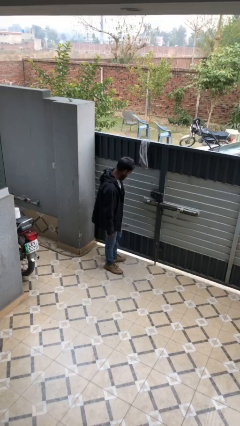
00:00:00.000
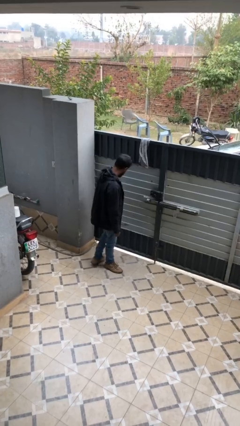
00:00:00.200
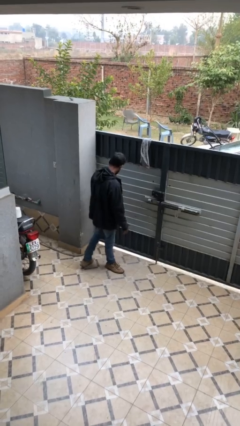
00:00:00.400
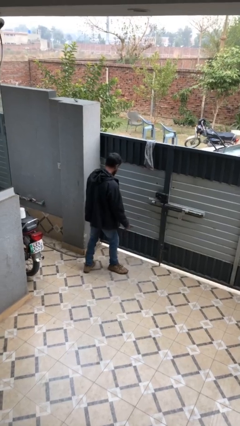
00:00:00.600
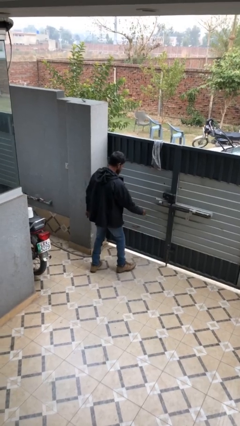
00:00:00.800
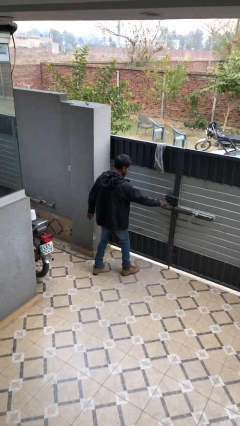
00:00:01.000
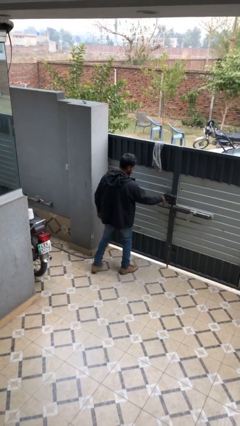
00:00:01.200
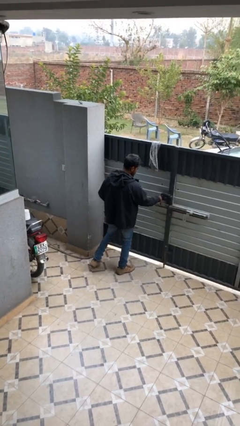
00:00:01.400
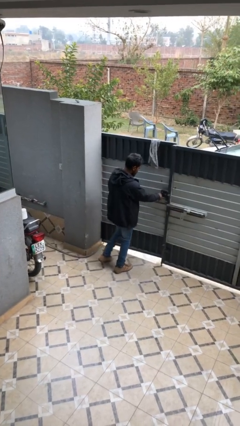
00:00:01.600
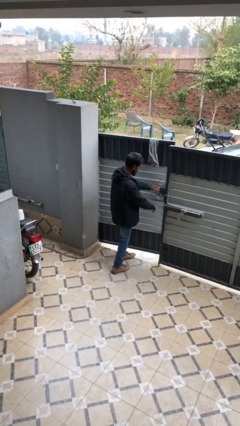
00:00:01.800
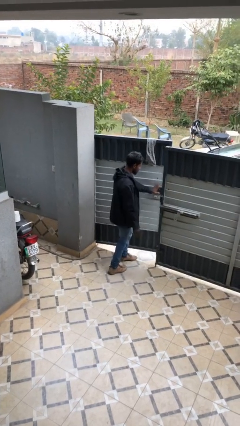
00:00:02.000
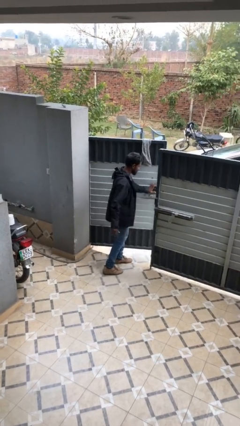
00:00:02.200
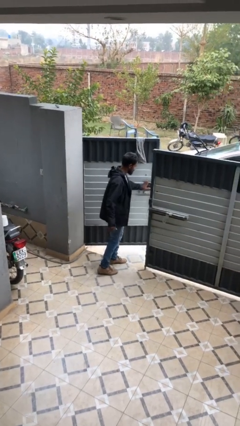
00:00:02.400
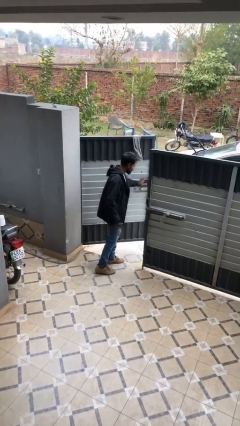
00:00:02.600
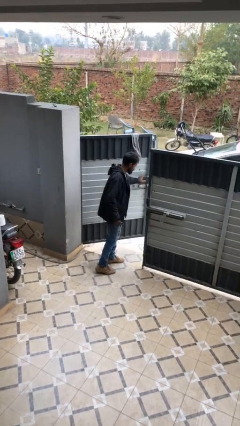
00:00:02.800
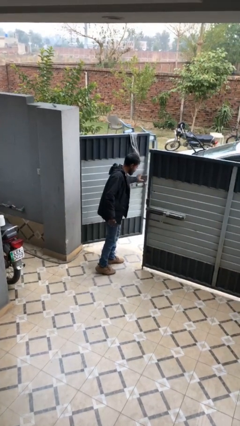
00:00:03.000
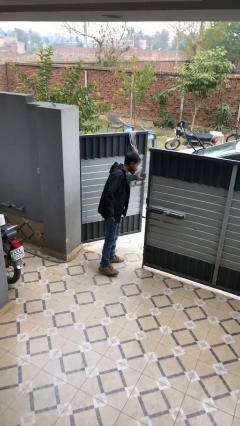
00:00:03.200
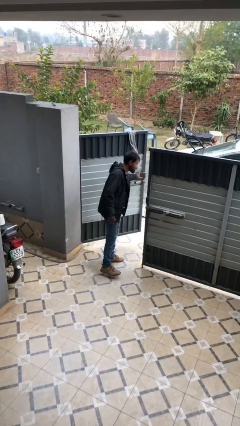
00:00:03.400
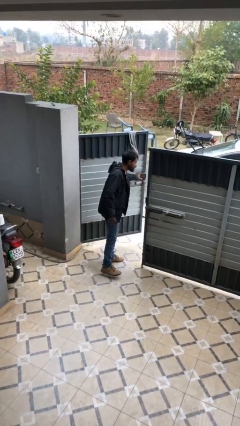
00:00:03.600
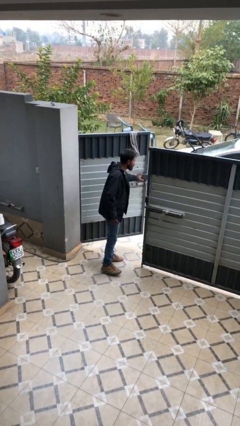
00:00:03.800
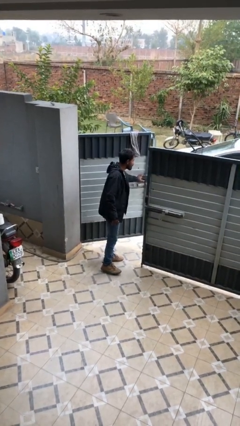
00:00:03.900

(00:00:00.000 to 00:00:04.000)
person opens facility door

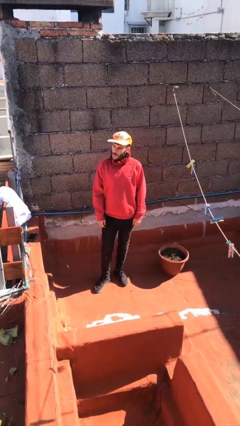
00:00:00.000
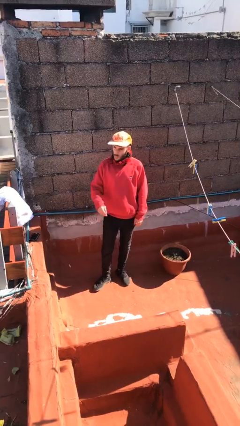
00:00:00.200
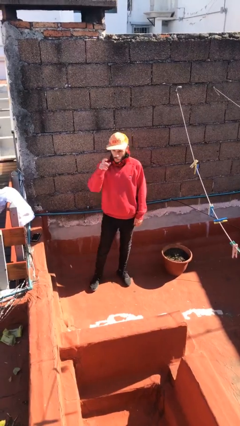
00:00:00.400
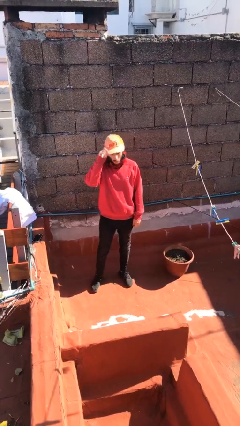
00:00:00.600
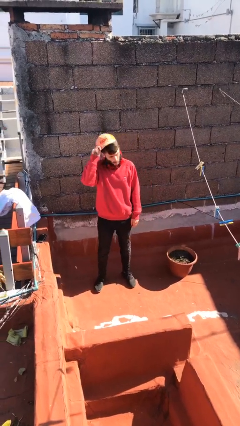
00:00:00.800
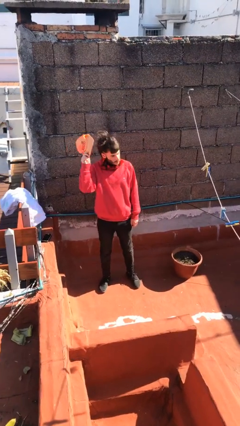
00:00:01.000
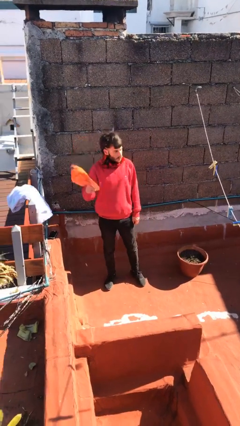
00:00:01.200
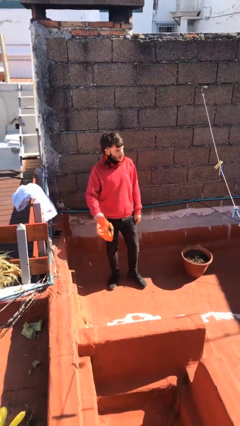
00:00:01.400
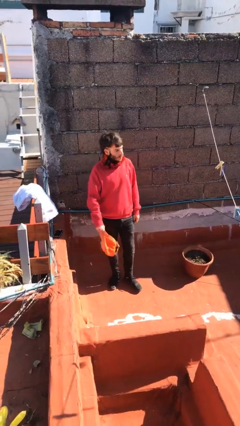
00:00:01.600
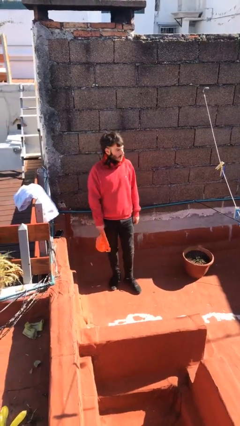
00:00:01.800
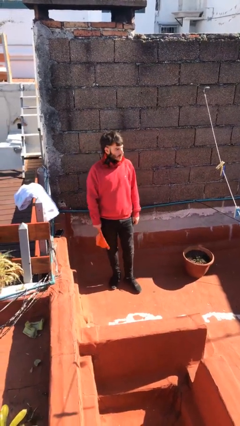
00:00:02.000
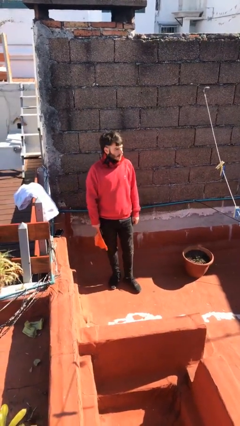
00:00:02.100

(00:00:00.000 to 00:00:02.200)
person takes off hat

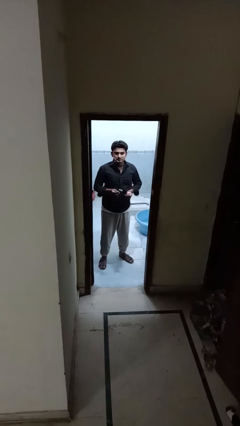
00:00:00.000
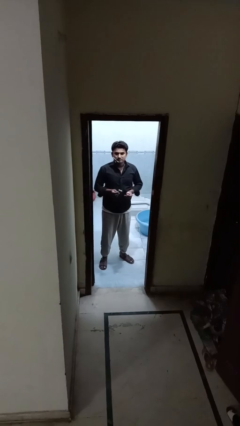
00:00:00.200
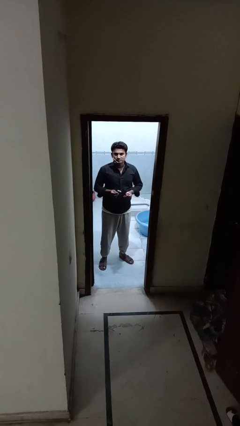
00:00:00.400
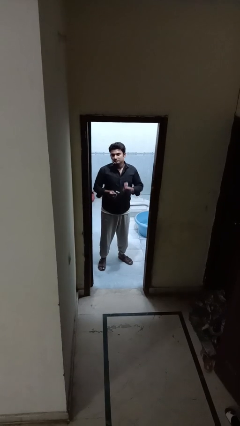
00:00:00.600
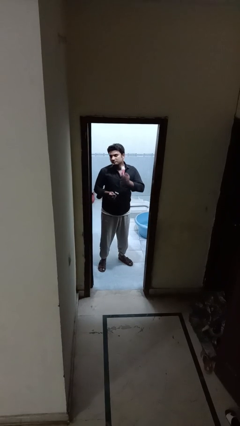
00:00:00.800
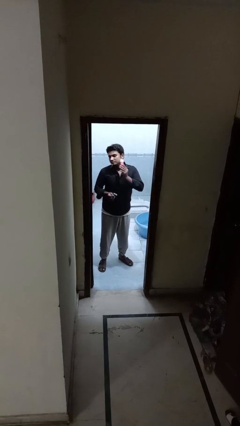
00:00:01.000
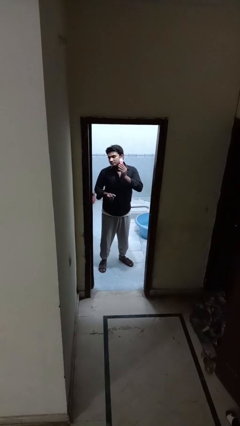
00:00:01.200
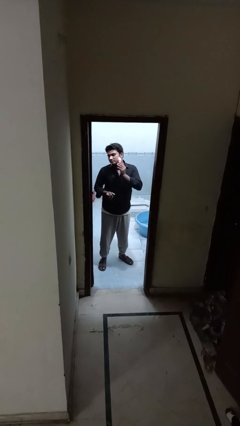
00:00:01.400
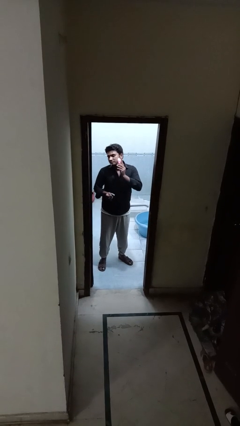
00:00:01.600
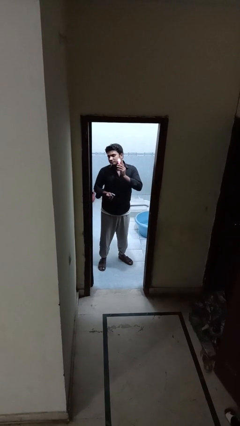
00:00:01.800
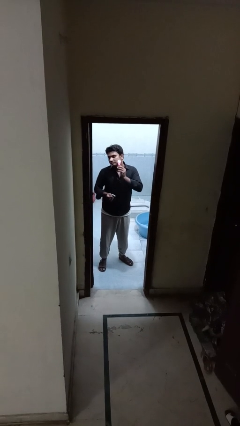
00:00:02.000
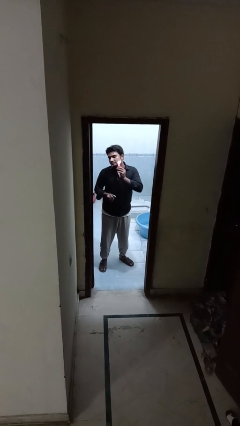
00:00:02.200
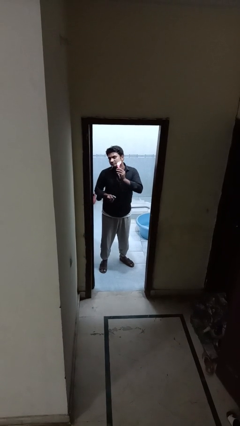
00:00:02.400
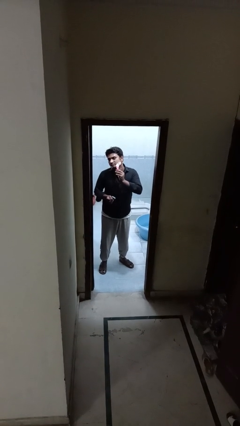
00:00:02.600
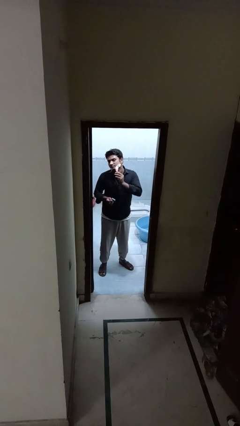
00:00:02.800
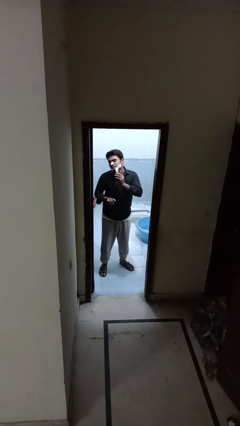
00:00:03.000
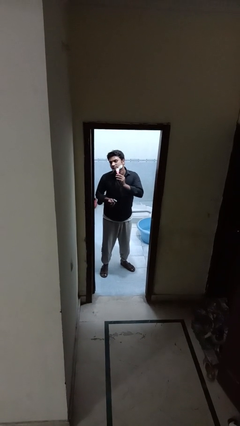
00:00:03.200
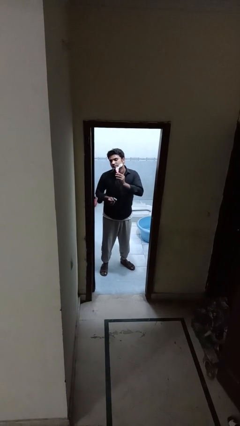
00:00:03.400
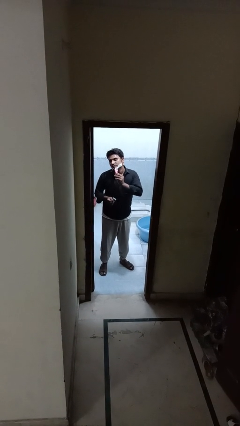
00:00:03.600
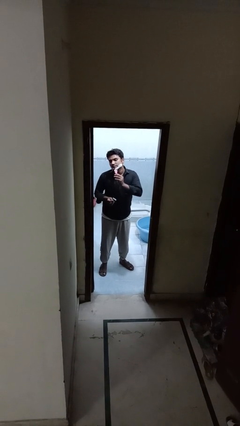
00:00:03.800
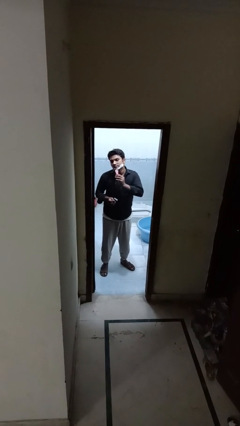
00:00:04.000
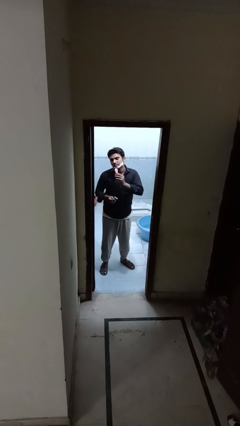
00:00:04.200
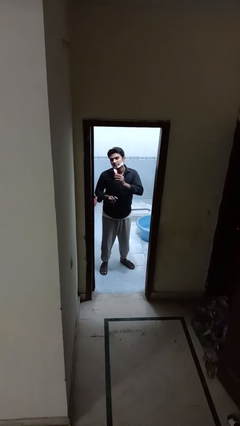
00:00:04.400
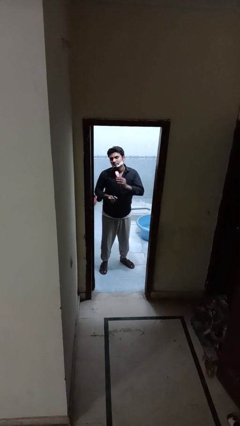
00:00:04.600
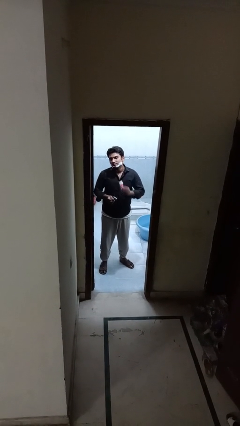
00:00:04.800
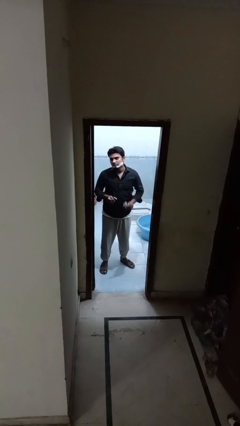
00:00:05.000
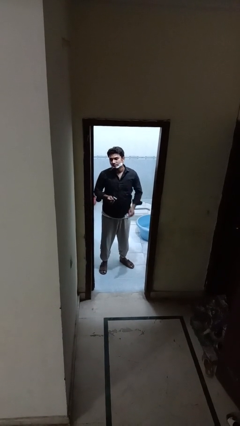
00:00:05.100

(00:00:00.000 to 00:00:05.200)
person applies shaving cream

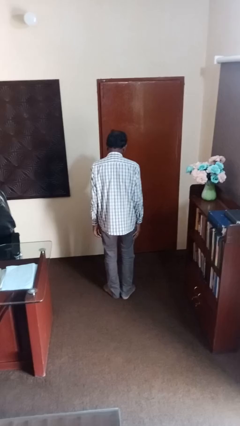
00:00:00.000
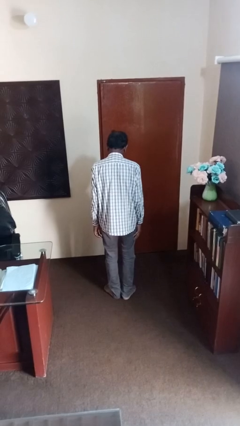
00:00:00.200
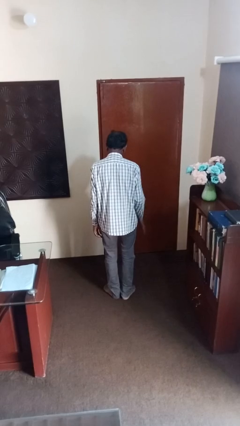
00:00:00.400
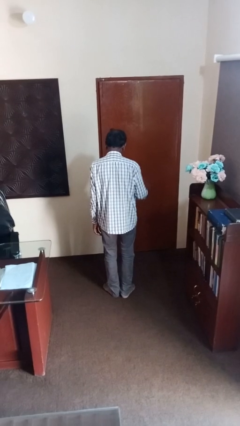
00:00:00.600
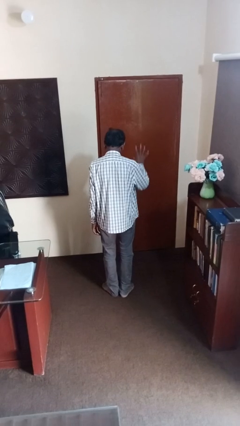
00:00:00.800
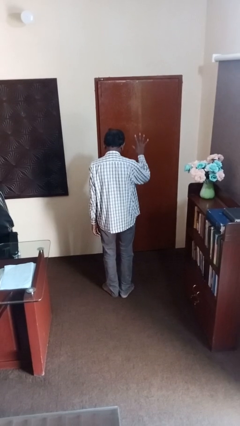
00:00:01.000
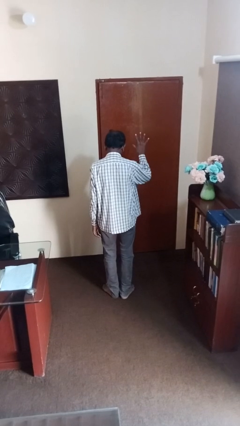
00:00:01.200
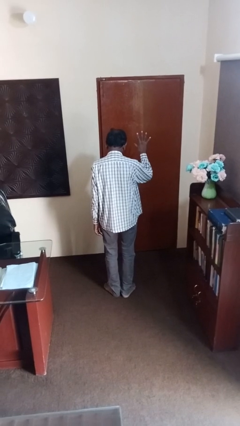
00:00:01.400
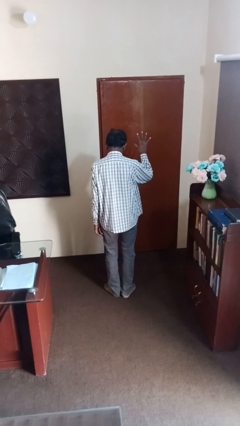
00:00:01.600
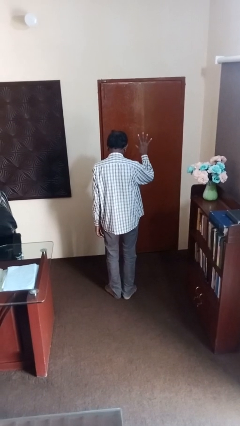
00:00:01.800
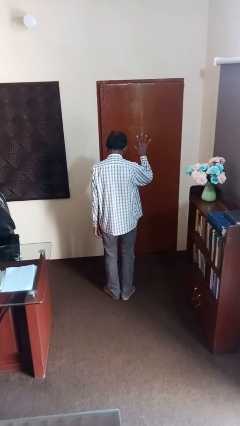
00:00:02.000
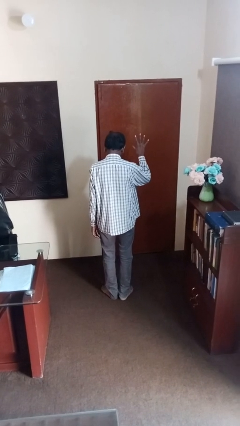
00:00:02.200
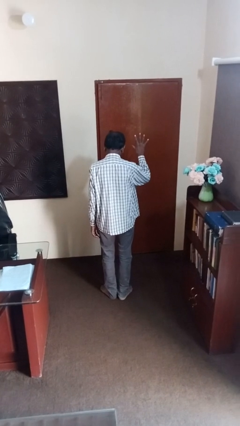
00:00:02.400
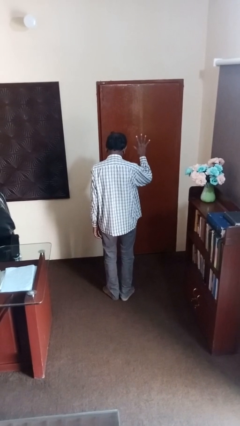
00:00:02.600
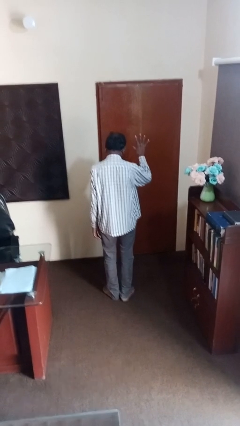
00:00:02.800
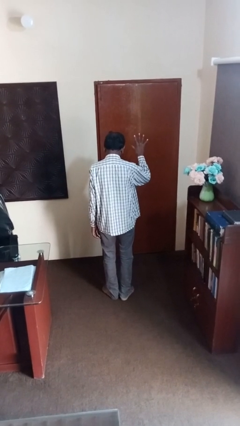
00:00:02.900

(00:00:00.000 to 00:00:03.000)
person gestures number five

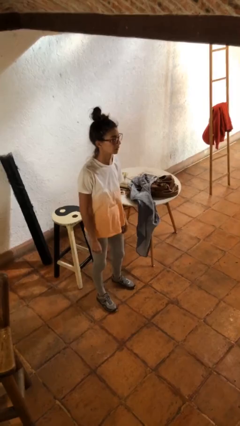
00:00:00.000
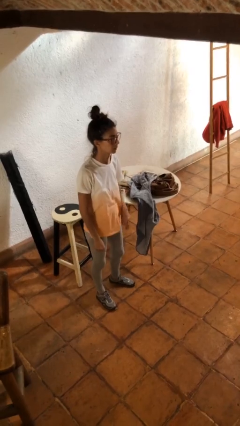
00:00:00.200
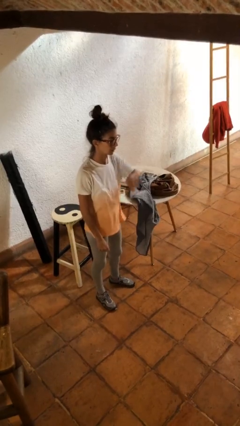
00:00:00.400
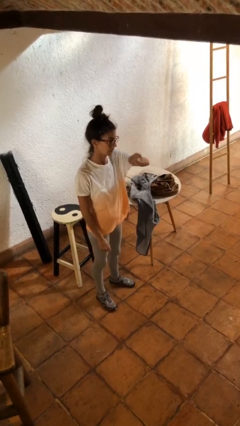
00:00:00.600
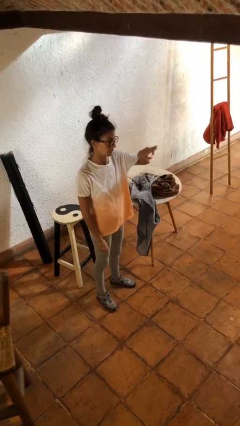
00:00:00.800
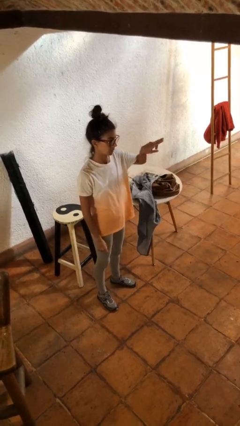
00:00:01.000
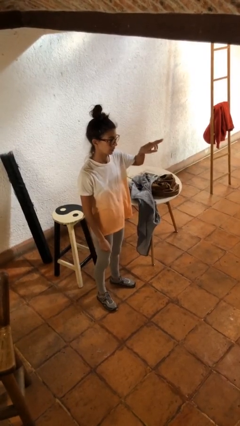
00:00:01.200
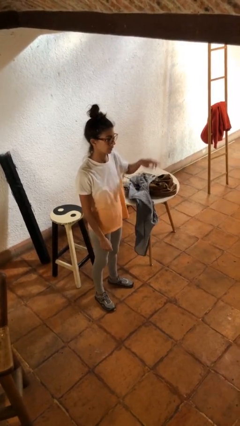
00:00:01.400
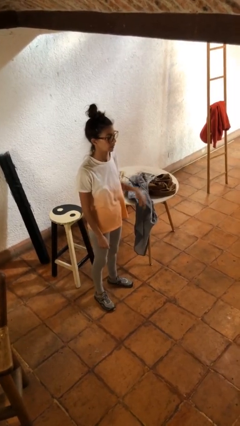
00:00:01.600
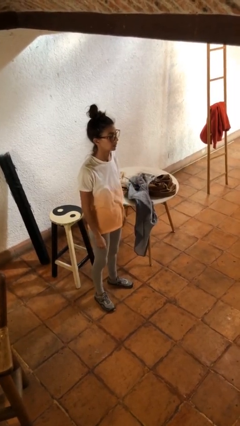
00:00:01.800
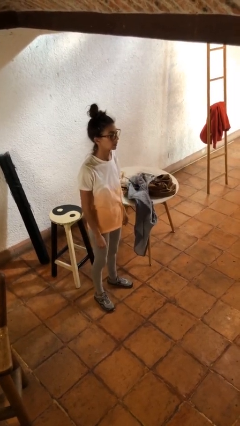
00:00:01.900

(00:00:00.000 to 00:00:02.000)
person gestures swipe left

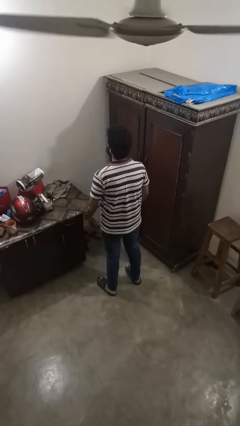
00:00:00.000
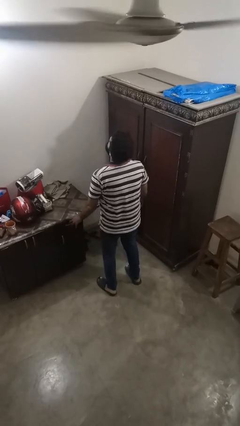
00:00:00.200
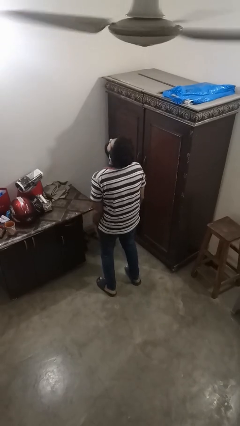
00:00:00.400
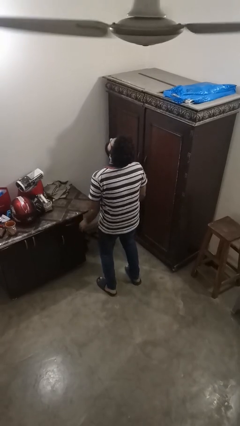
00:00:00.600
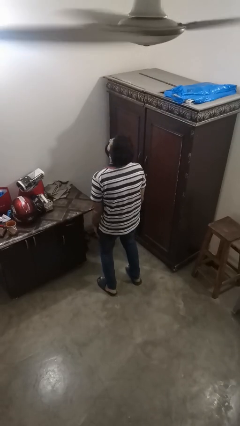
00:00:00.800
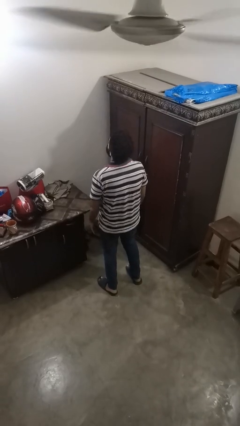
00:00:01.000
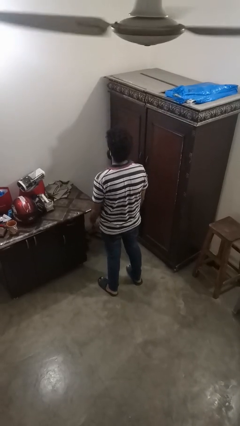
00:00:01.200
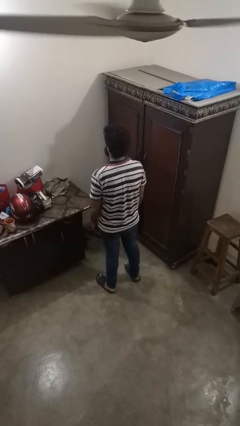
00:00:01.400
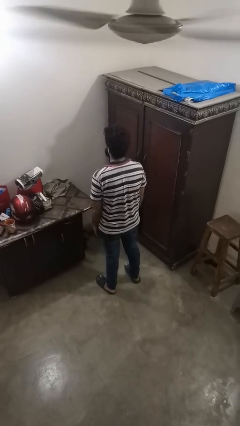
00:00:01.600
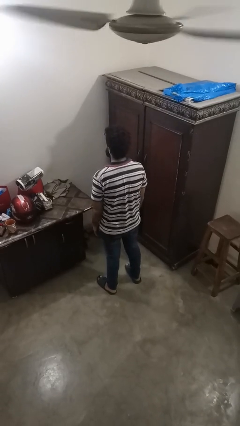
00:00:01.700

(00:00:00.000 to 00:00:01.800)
person slaps hands on thighs
